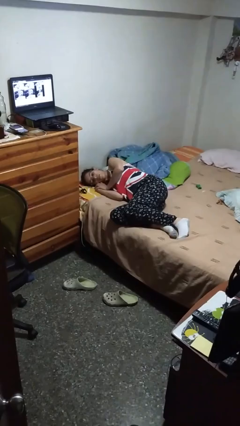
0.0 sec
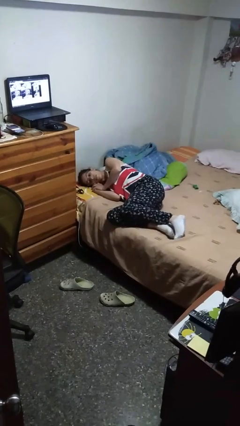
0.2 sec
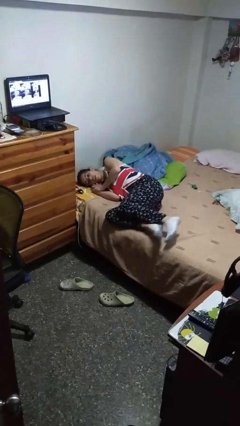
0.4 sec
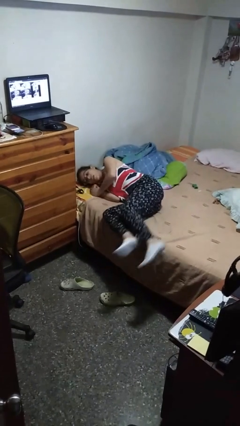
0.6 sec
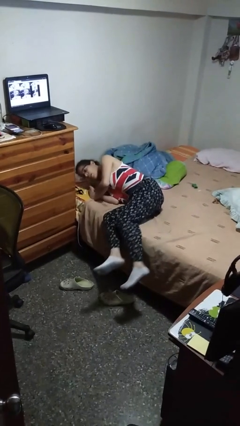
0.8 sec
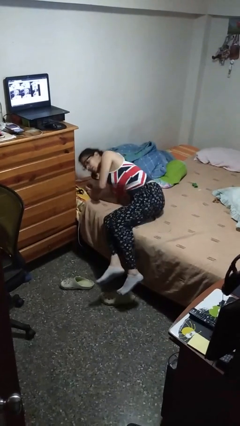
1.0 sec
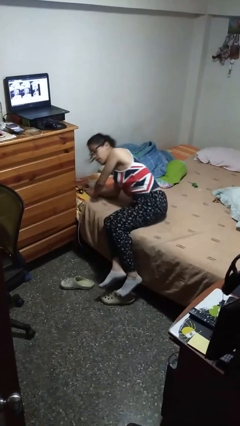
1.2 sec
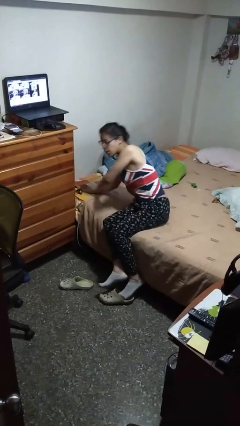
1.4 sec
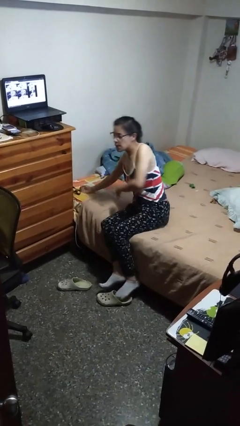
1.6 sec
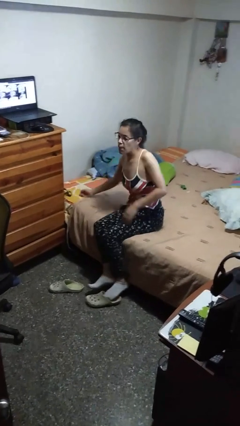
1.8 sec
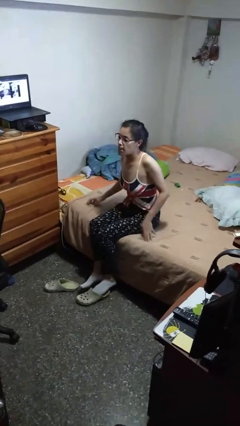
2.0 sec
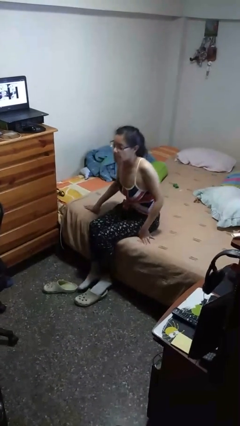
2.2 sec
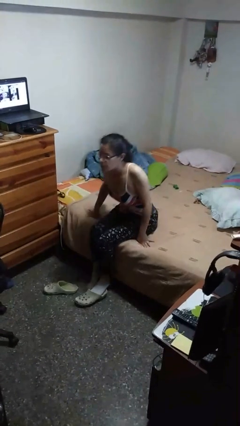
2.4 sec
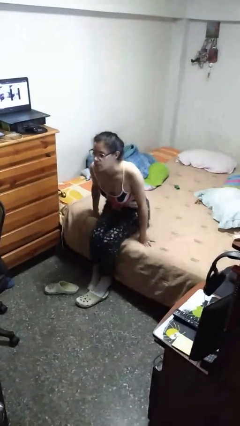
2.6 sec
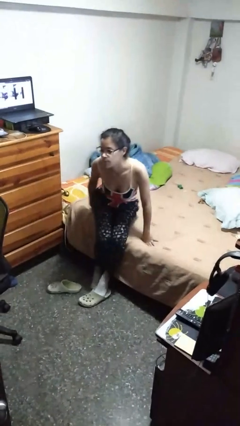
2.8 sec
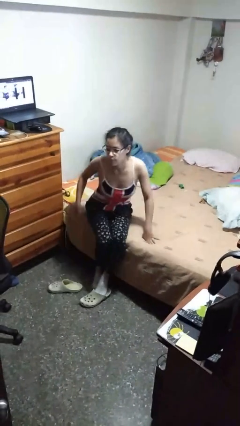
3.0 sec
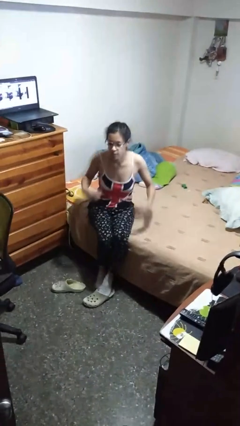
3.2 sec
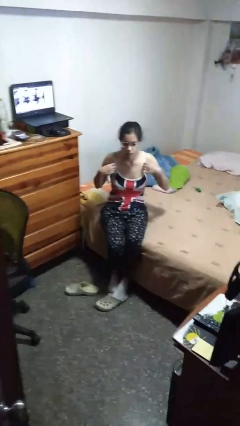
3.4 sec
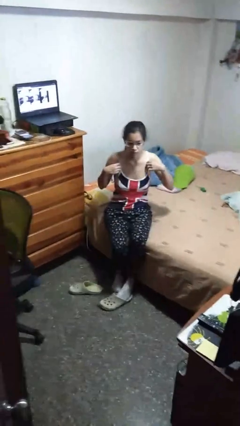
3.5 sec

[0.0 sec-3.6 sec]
person stands up

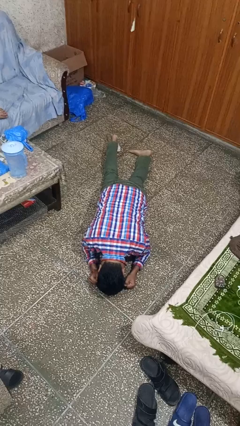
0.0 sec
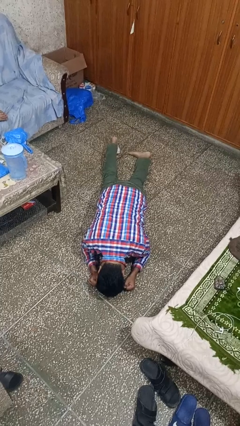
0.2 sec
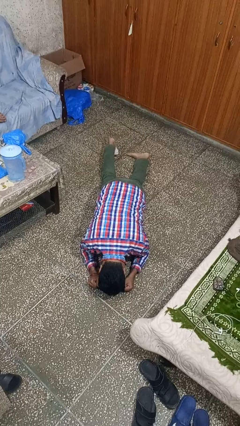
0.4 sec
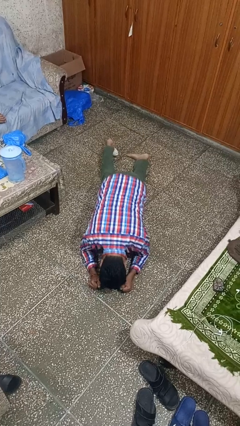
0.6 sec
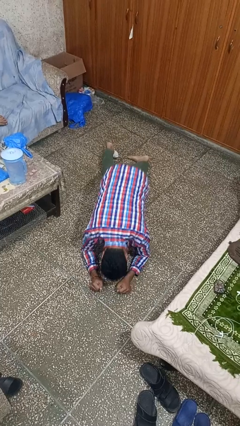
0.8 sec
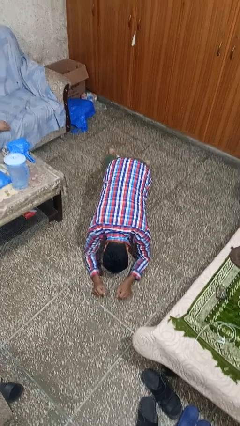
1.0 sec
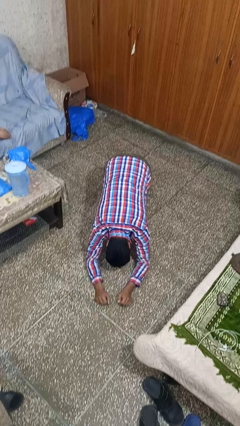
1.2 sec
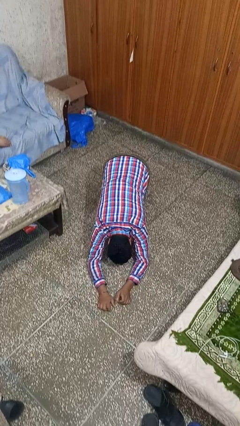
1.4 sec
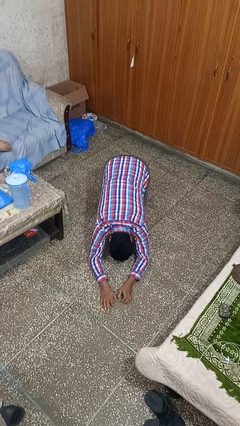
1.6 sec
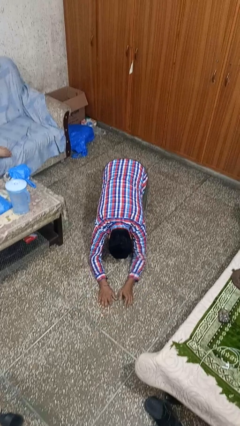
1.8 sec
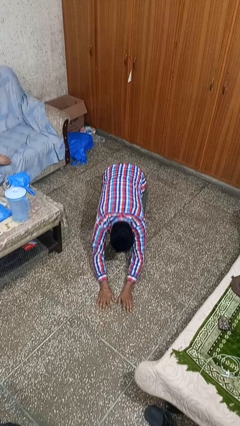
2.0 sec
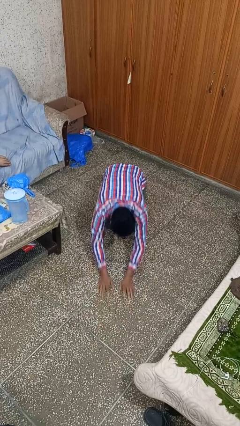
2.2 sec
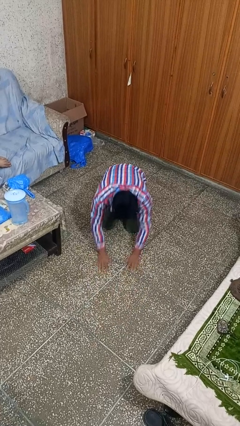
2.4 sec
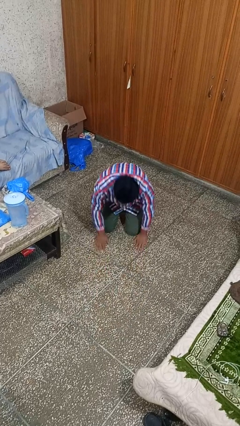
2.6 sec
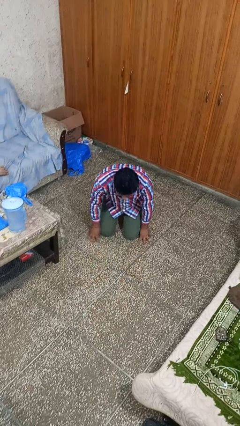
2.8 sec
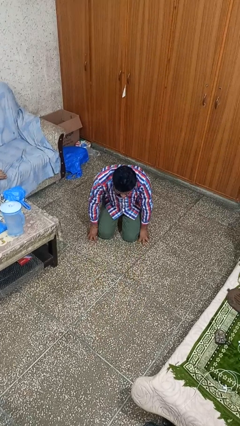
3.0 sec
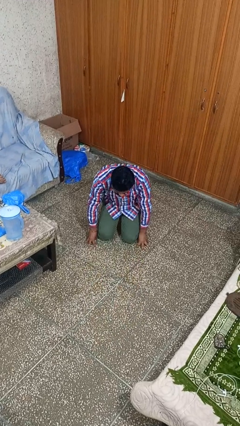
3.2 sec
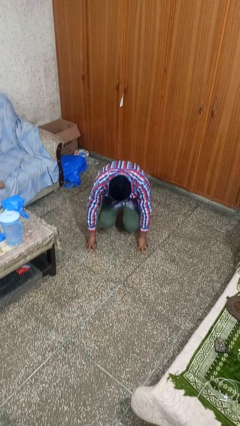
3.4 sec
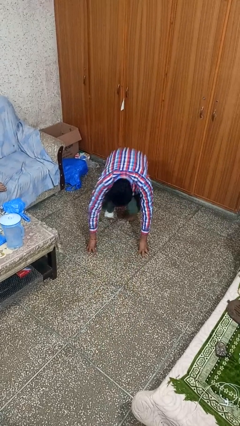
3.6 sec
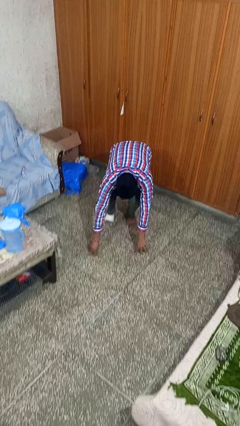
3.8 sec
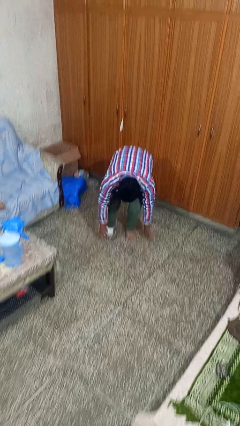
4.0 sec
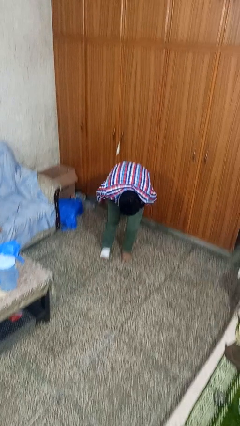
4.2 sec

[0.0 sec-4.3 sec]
person stands up from floor

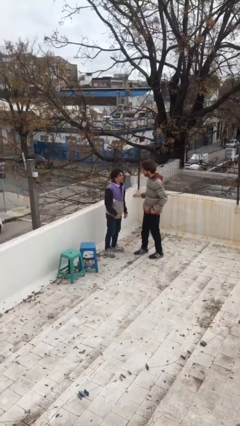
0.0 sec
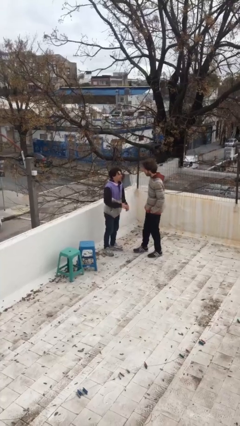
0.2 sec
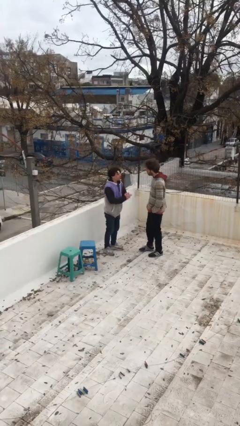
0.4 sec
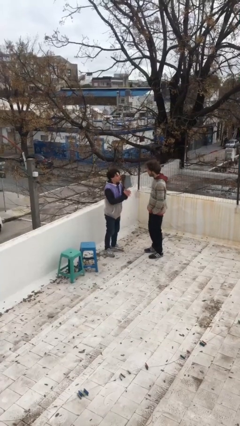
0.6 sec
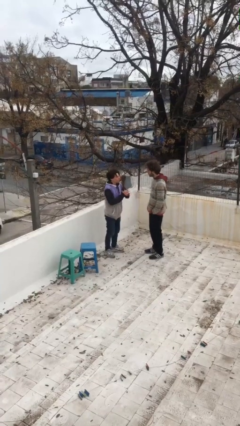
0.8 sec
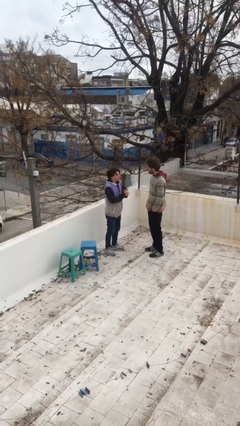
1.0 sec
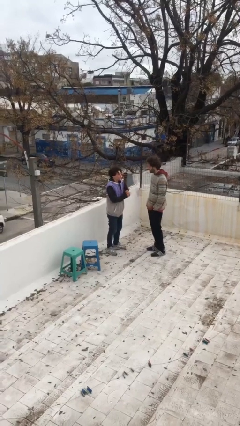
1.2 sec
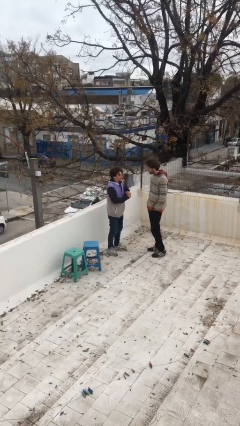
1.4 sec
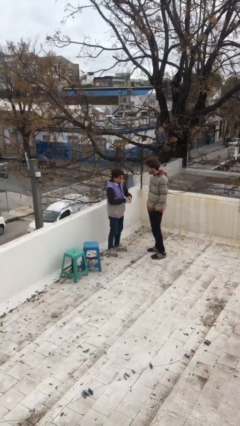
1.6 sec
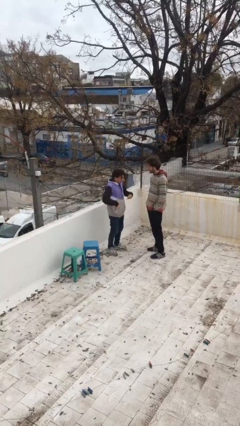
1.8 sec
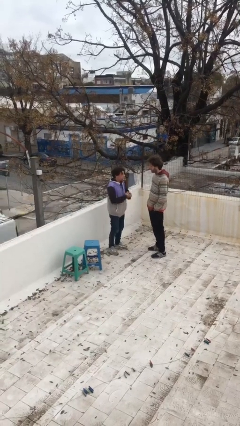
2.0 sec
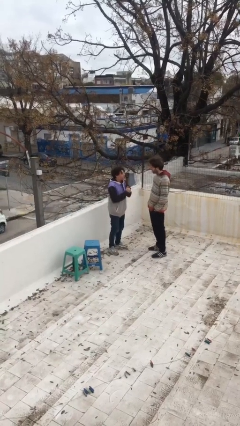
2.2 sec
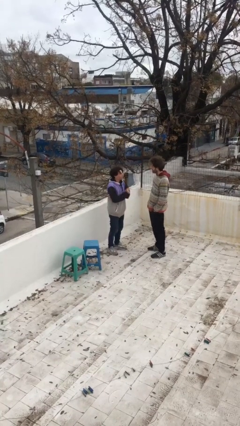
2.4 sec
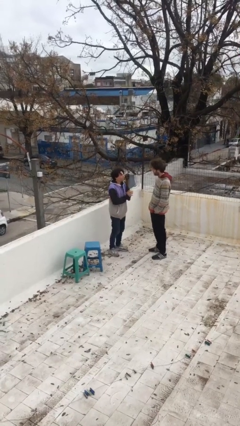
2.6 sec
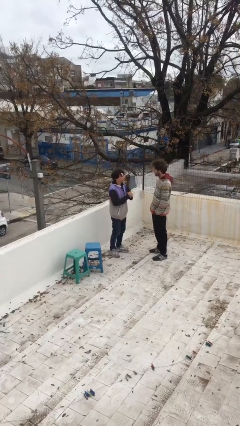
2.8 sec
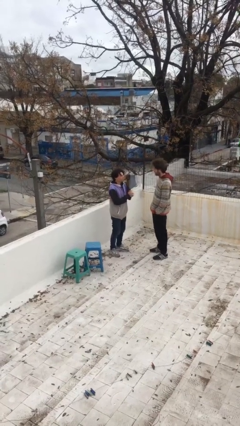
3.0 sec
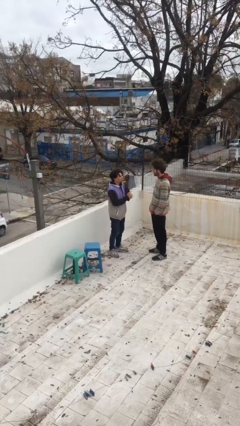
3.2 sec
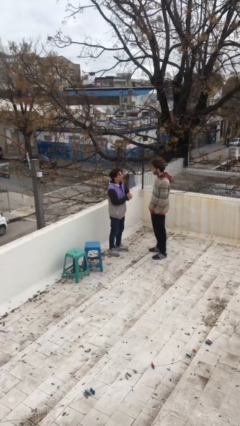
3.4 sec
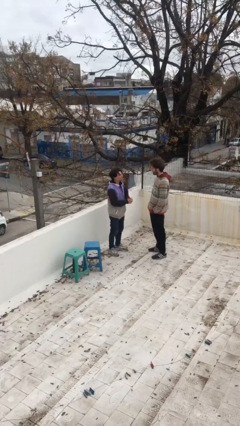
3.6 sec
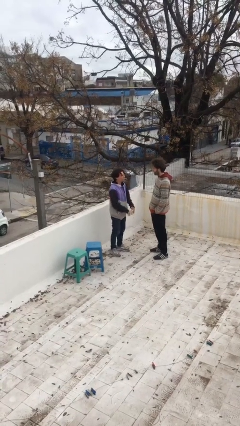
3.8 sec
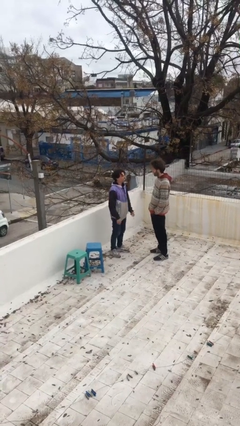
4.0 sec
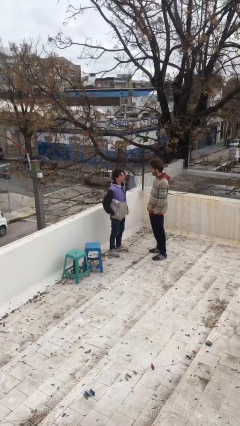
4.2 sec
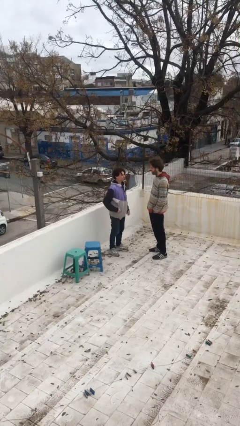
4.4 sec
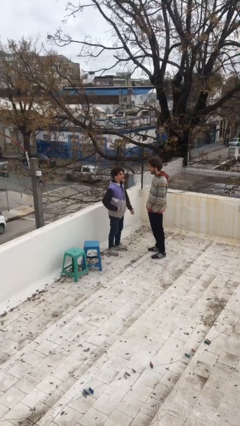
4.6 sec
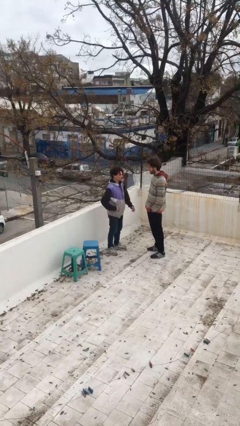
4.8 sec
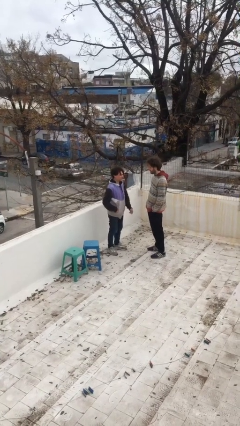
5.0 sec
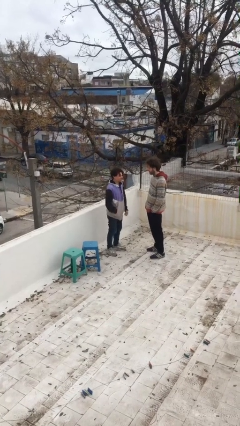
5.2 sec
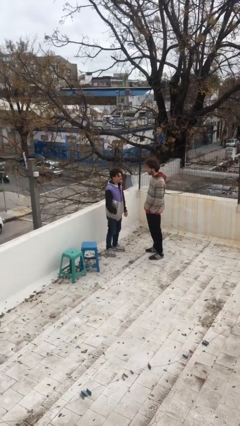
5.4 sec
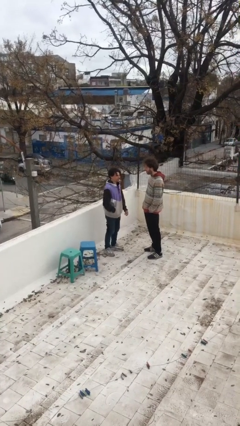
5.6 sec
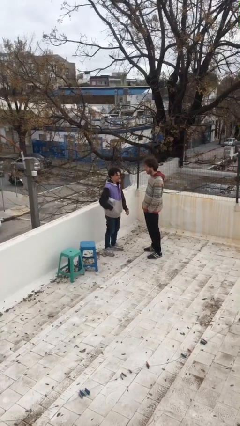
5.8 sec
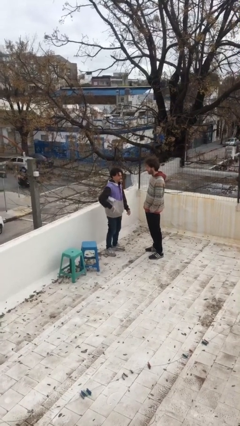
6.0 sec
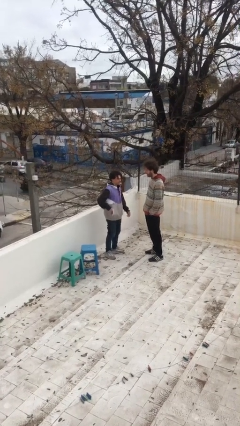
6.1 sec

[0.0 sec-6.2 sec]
person talks to person

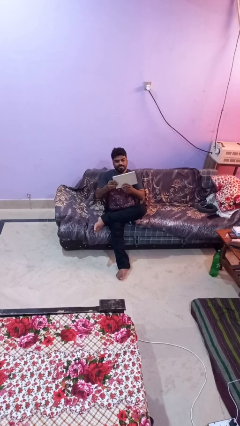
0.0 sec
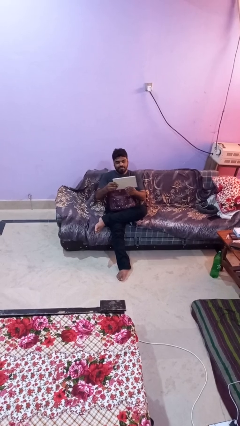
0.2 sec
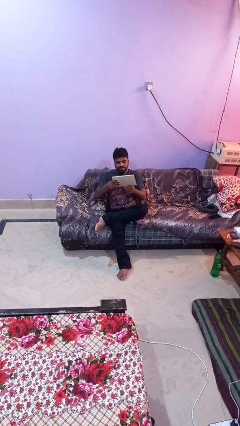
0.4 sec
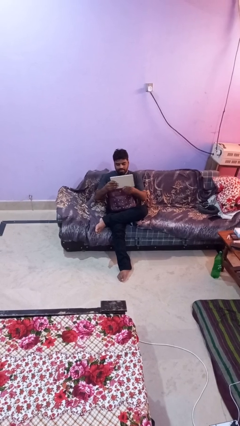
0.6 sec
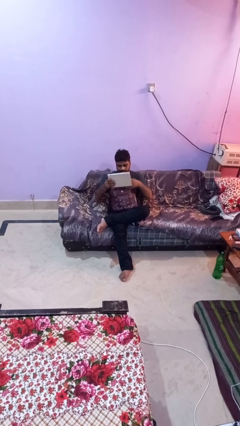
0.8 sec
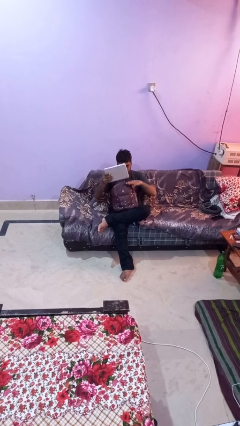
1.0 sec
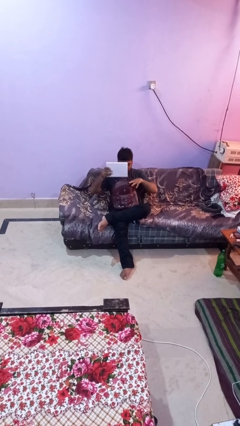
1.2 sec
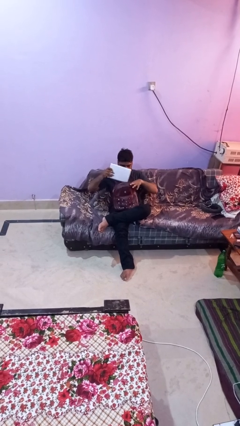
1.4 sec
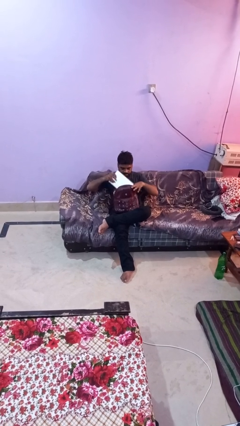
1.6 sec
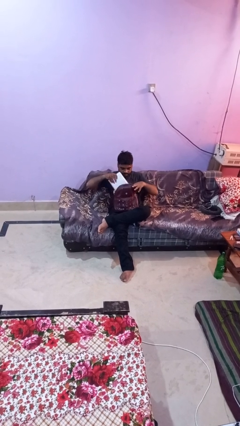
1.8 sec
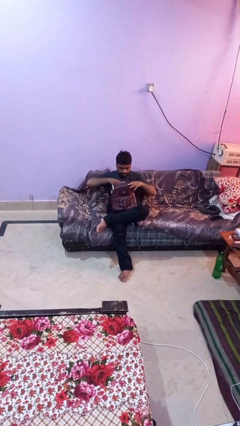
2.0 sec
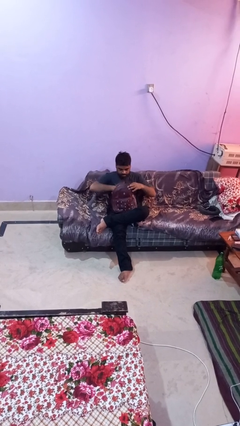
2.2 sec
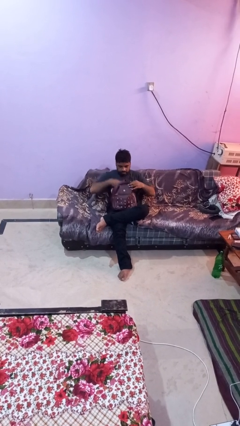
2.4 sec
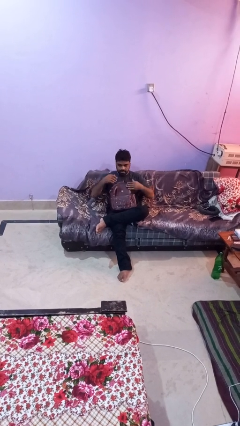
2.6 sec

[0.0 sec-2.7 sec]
person puts object into backpack

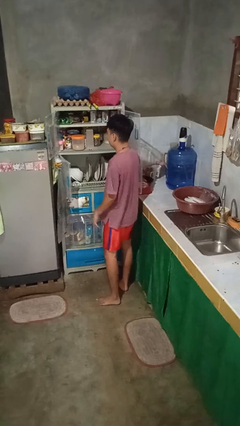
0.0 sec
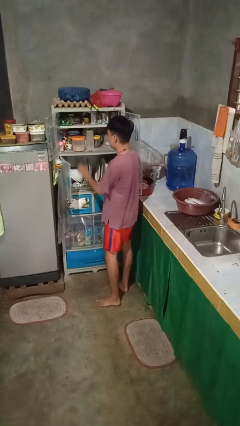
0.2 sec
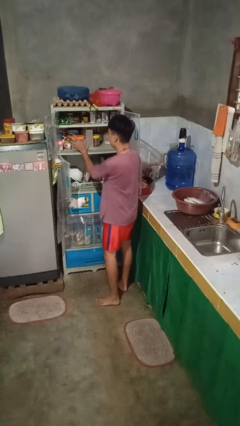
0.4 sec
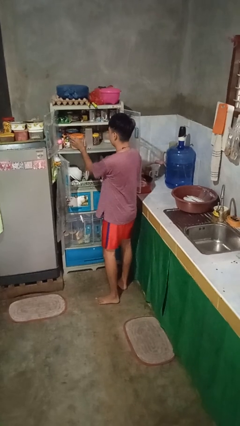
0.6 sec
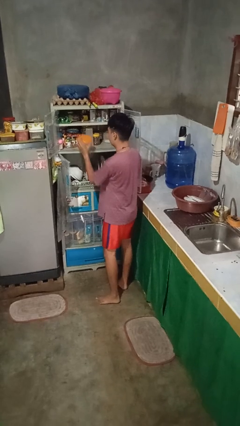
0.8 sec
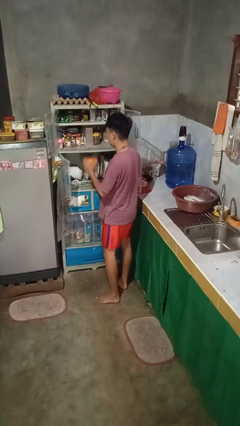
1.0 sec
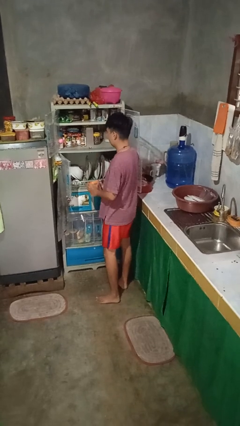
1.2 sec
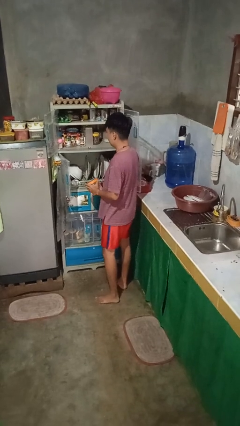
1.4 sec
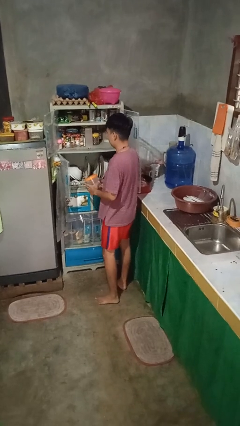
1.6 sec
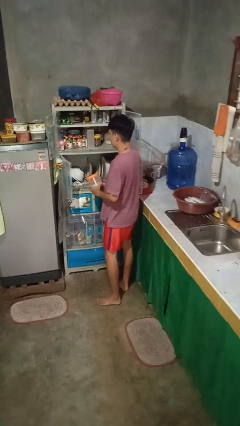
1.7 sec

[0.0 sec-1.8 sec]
person takes object from cabinet
